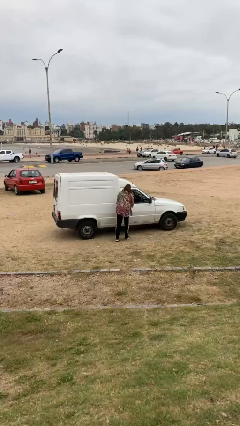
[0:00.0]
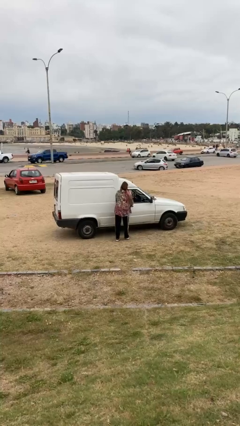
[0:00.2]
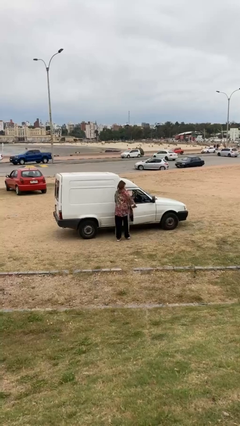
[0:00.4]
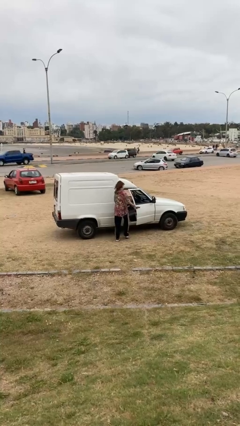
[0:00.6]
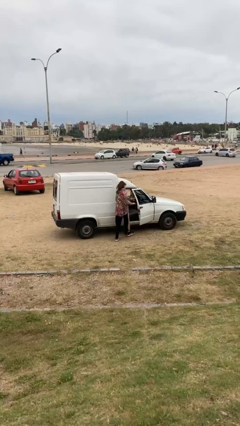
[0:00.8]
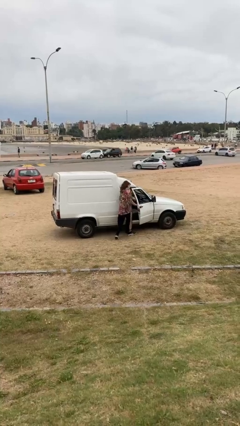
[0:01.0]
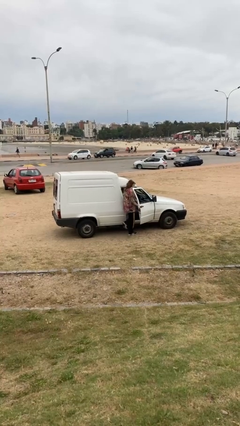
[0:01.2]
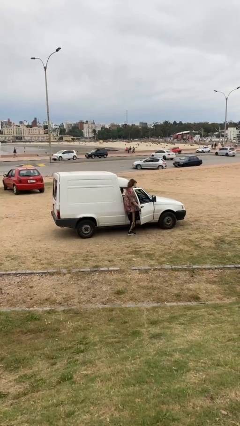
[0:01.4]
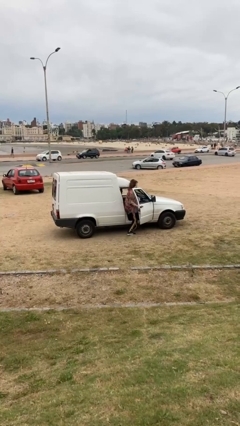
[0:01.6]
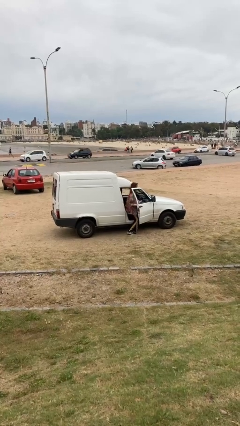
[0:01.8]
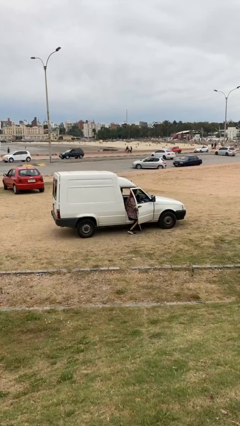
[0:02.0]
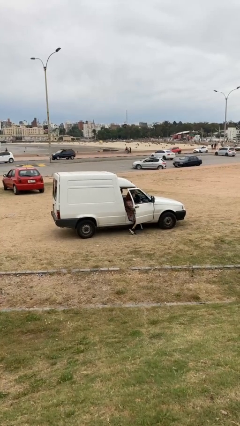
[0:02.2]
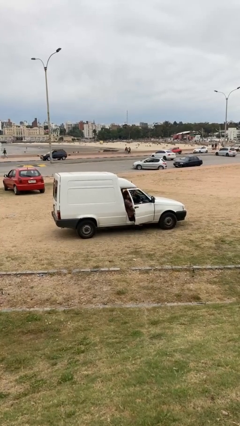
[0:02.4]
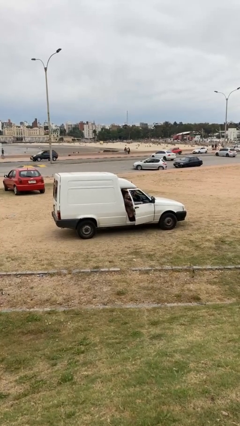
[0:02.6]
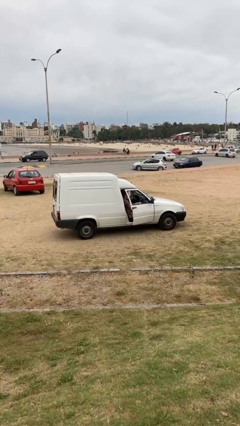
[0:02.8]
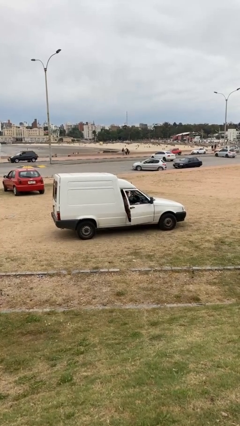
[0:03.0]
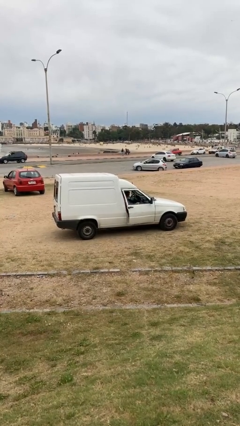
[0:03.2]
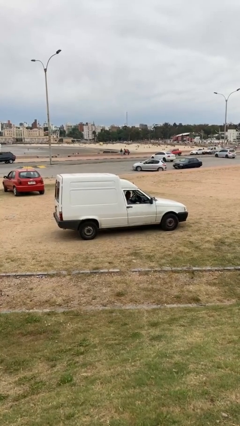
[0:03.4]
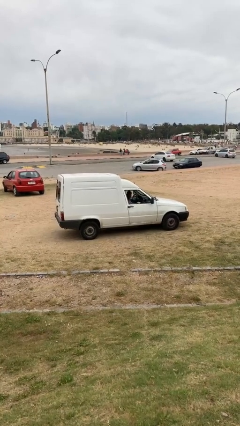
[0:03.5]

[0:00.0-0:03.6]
car picks up person

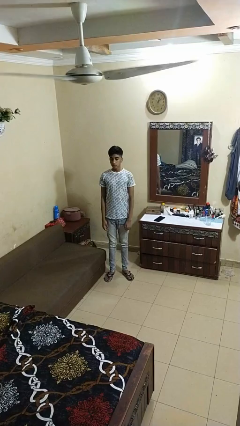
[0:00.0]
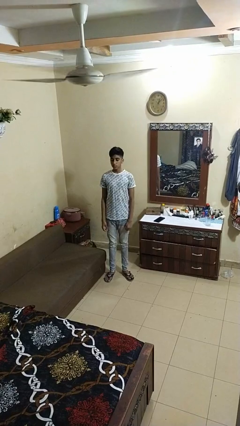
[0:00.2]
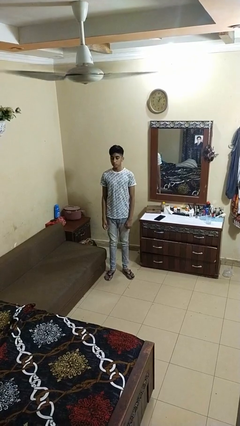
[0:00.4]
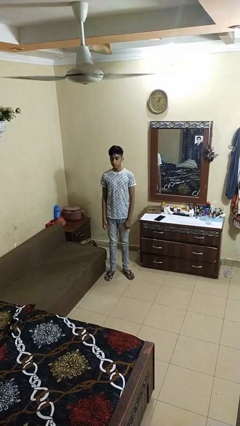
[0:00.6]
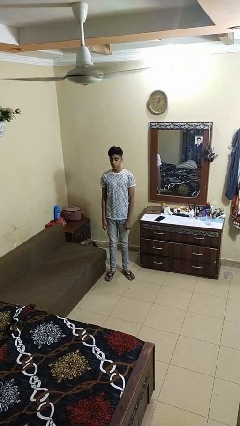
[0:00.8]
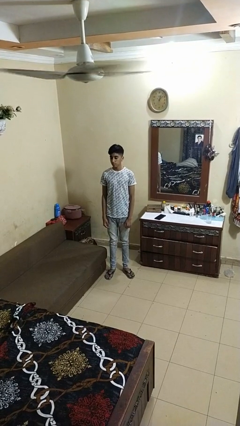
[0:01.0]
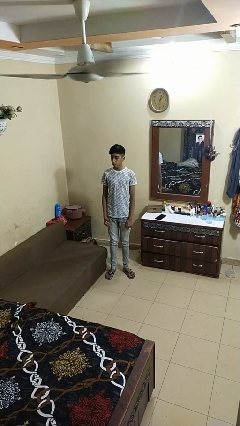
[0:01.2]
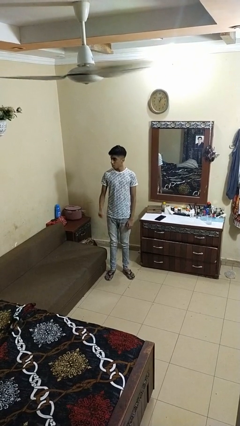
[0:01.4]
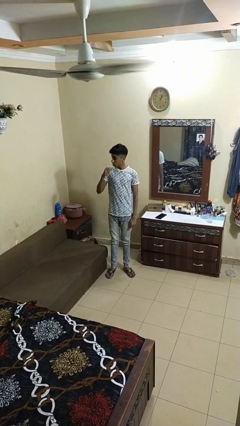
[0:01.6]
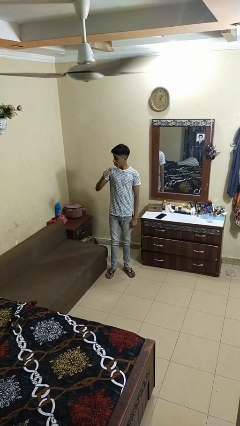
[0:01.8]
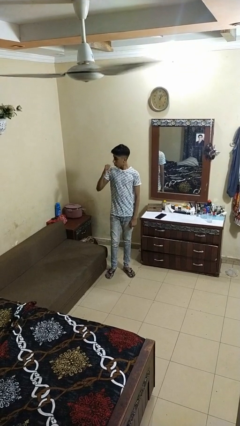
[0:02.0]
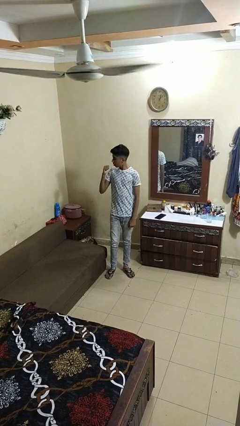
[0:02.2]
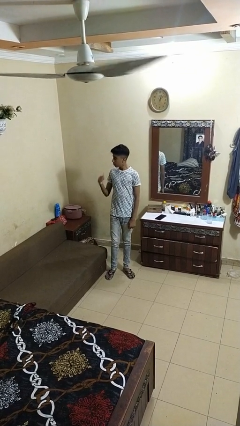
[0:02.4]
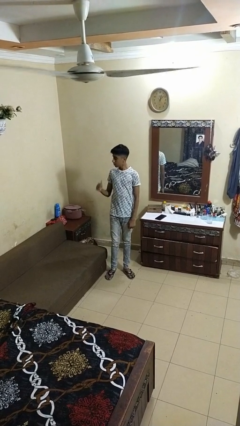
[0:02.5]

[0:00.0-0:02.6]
person gestures behind me

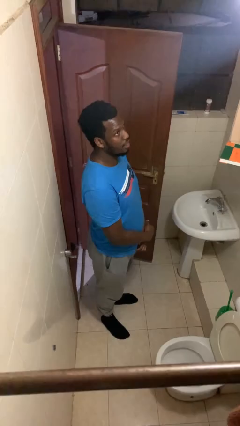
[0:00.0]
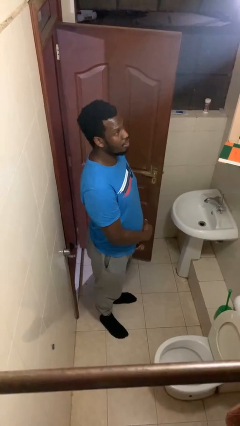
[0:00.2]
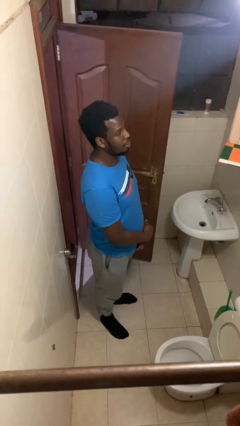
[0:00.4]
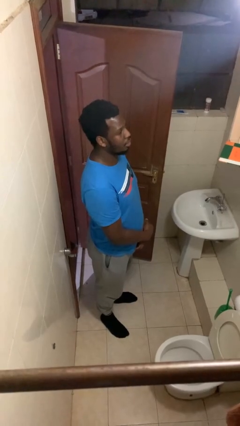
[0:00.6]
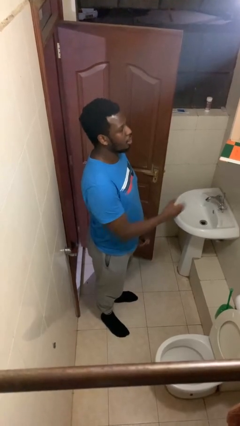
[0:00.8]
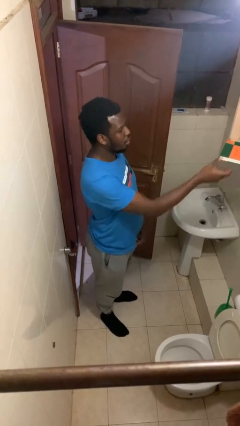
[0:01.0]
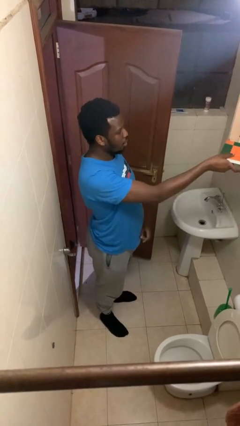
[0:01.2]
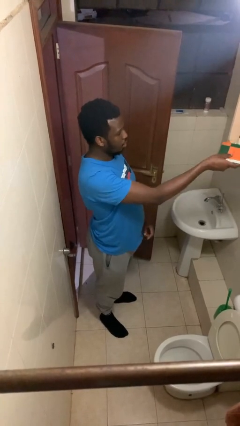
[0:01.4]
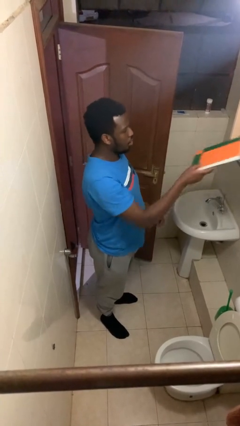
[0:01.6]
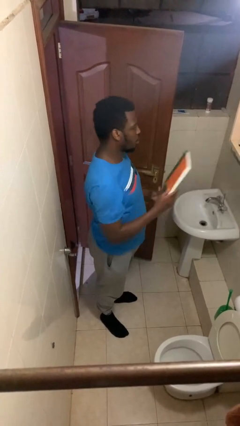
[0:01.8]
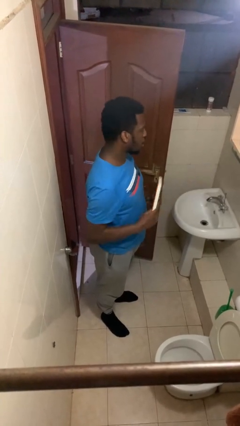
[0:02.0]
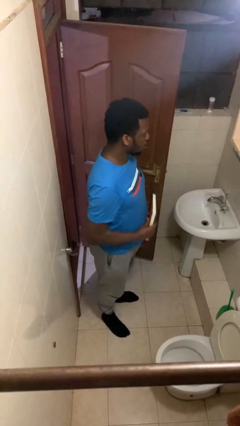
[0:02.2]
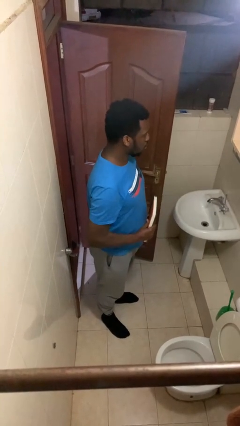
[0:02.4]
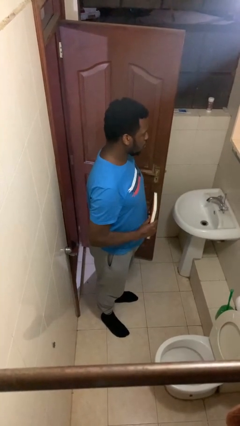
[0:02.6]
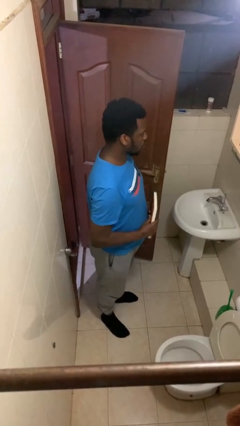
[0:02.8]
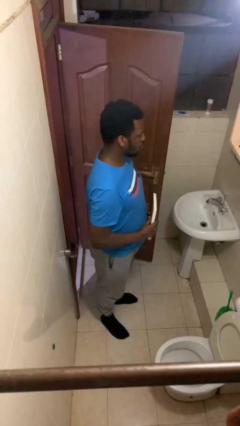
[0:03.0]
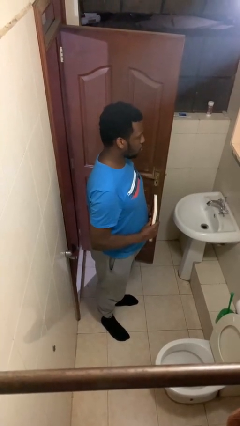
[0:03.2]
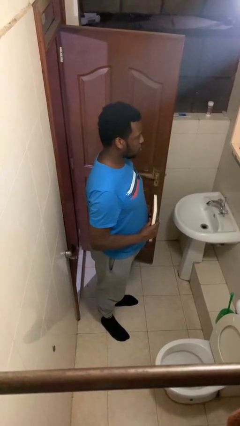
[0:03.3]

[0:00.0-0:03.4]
person picks up object from cabinet

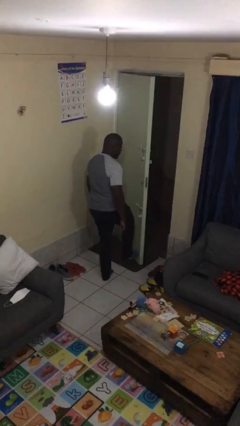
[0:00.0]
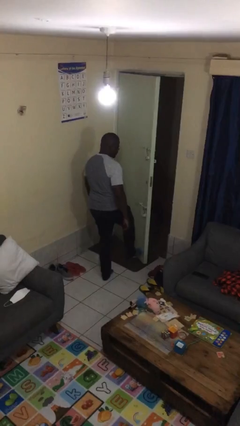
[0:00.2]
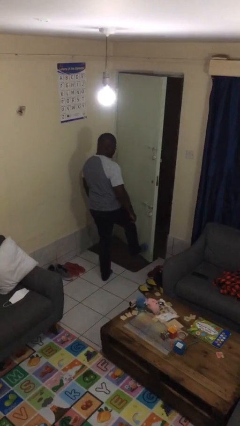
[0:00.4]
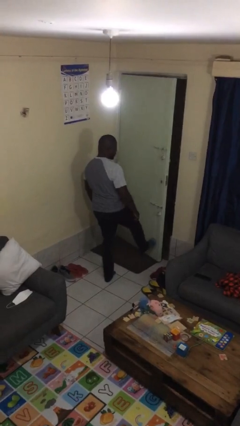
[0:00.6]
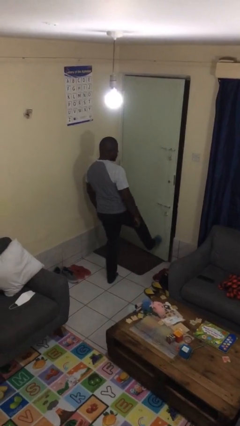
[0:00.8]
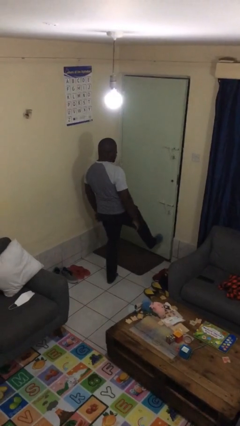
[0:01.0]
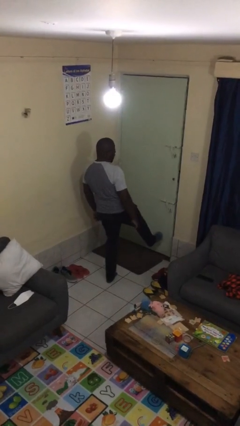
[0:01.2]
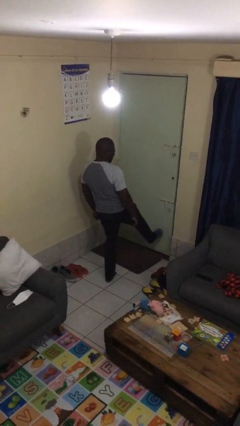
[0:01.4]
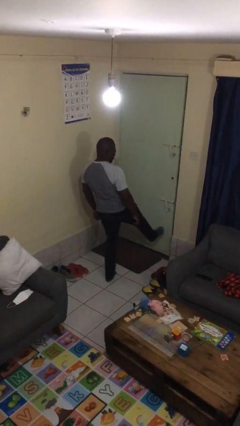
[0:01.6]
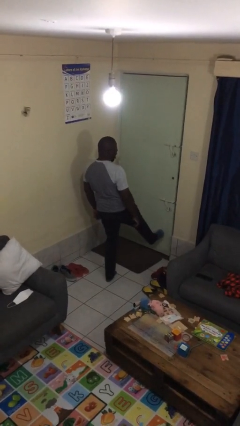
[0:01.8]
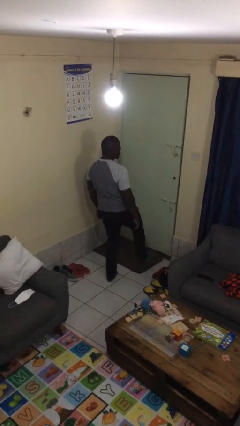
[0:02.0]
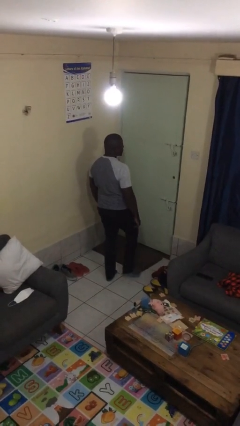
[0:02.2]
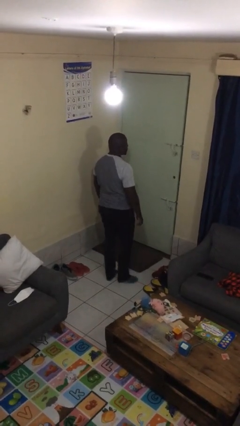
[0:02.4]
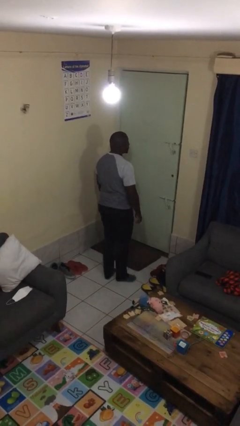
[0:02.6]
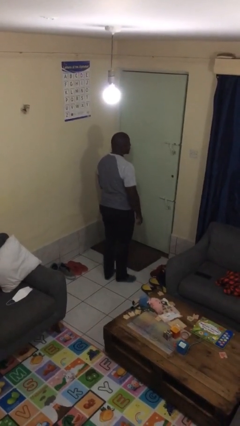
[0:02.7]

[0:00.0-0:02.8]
person closes door with foot

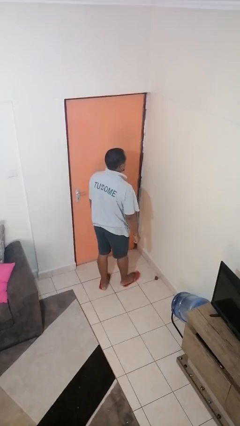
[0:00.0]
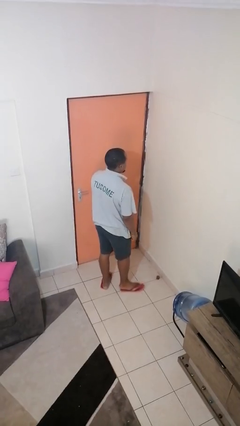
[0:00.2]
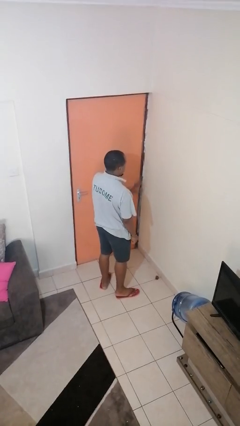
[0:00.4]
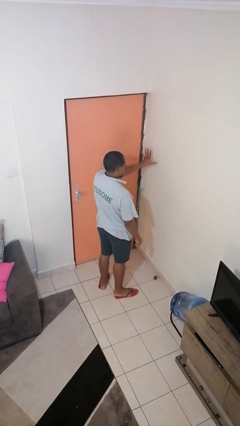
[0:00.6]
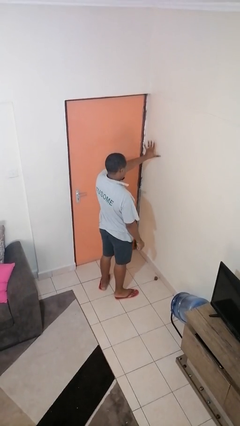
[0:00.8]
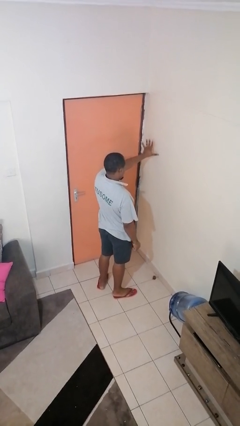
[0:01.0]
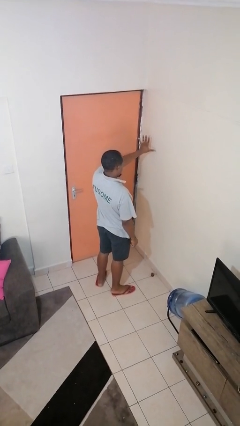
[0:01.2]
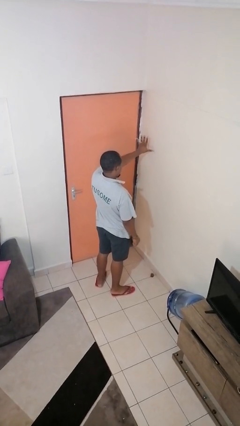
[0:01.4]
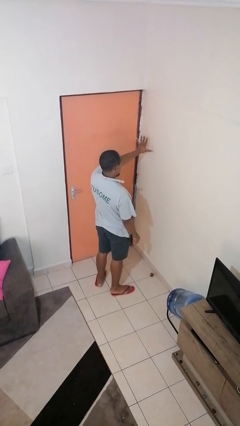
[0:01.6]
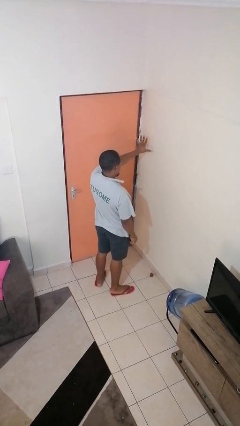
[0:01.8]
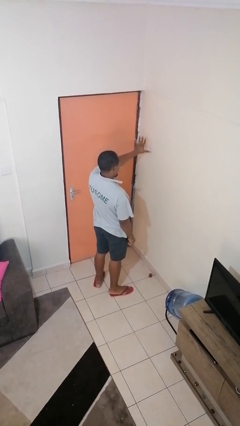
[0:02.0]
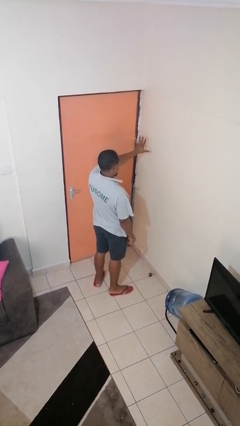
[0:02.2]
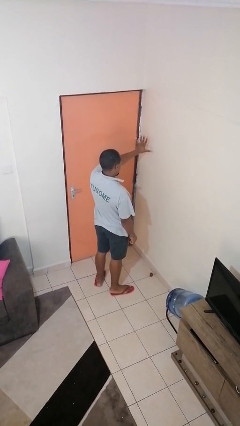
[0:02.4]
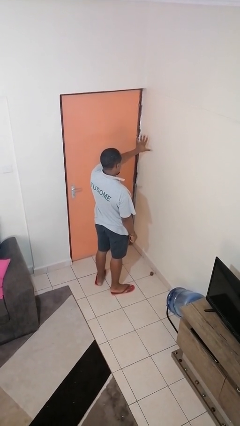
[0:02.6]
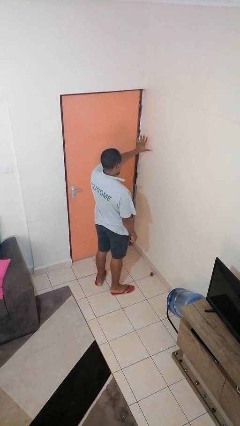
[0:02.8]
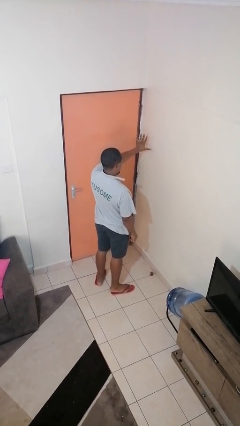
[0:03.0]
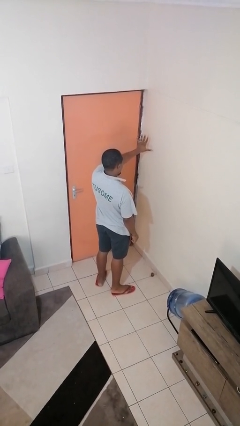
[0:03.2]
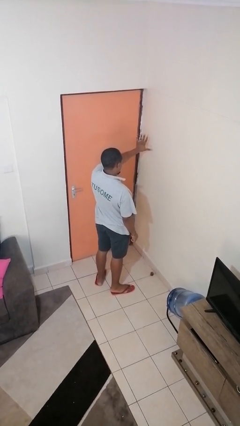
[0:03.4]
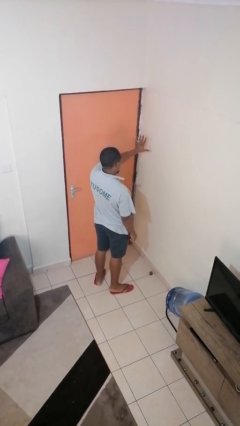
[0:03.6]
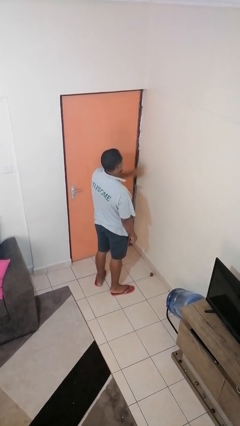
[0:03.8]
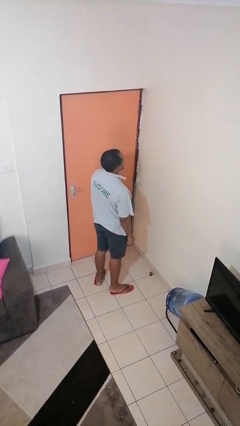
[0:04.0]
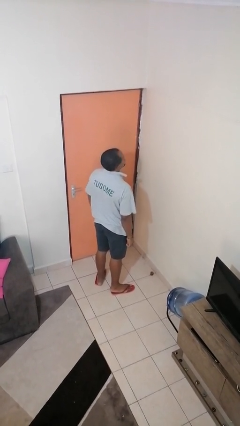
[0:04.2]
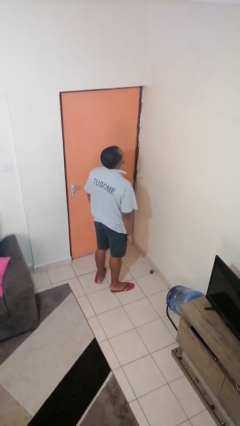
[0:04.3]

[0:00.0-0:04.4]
person gestures number five

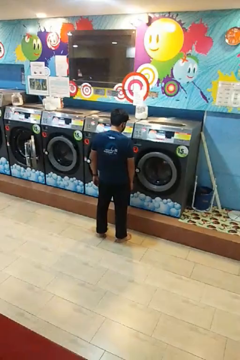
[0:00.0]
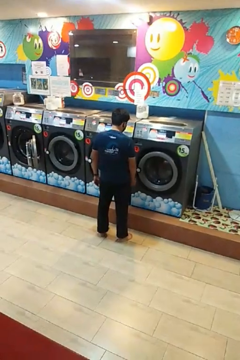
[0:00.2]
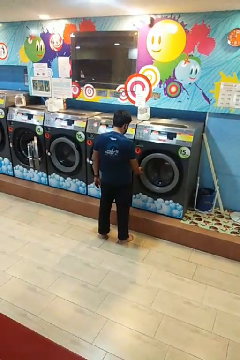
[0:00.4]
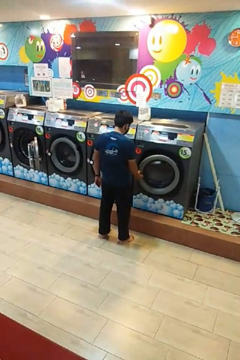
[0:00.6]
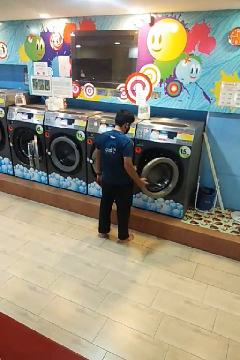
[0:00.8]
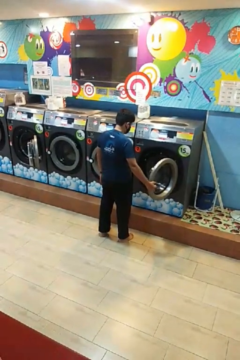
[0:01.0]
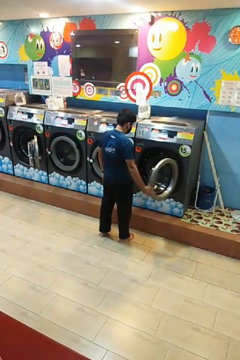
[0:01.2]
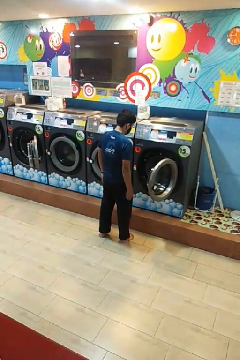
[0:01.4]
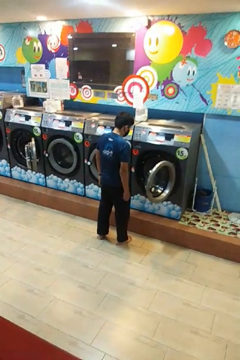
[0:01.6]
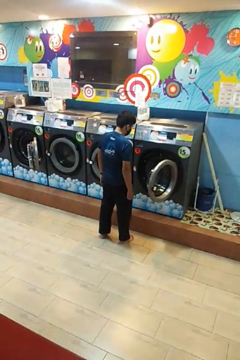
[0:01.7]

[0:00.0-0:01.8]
person opens clothes washer
